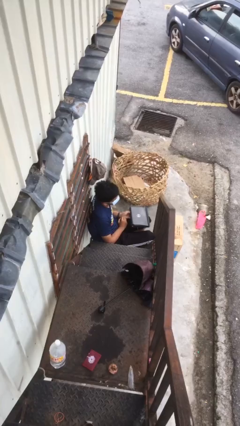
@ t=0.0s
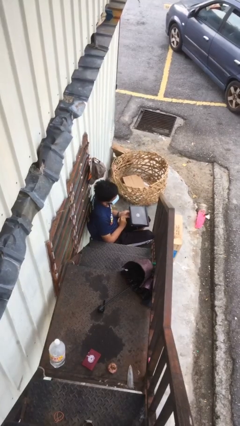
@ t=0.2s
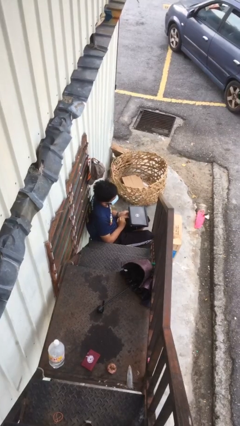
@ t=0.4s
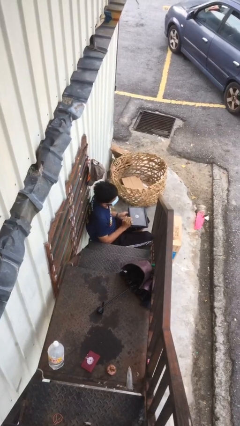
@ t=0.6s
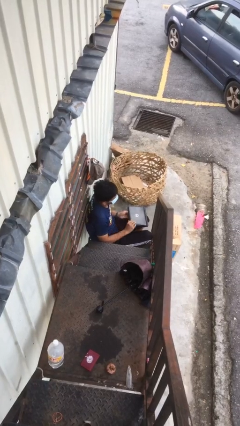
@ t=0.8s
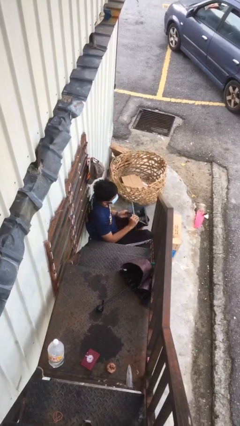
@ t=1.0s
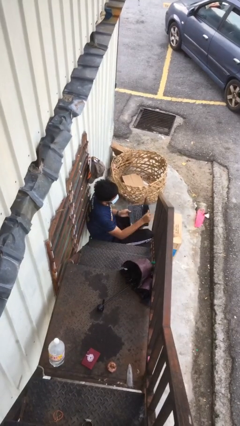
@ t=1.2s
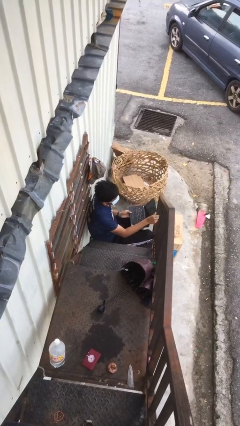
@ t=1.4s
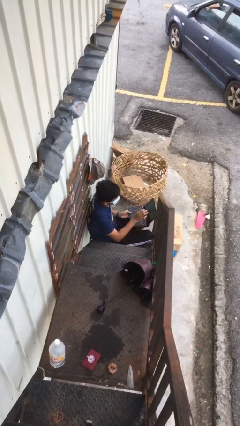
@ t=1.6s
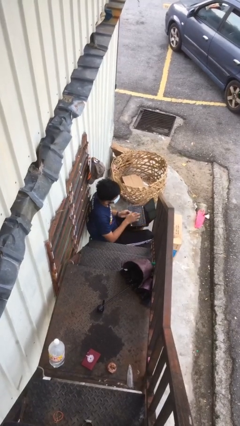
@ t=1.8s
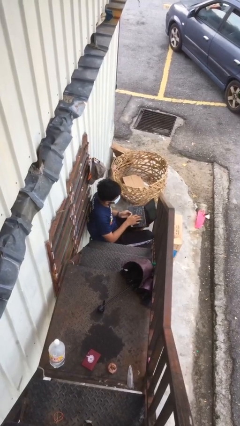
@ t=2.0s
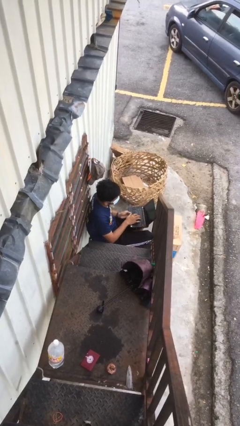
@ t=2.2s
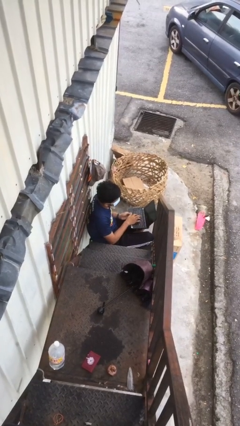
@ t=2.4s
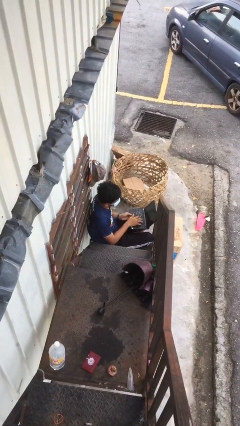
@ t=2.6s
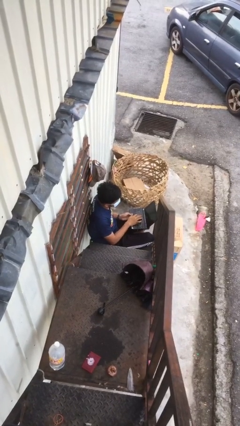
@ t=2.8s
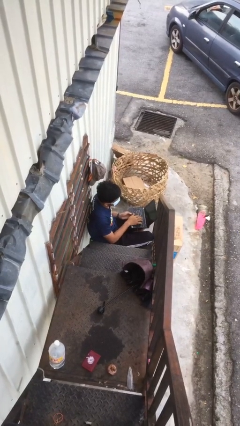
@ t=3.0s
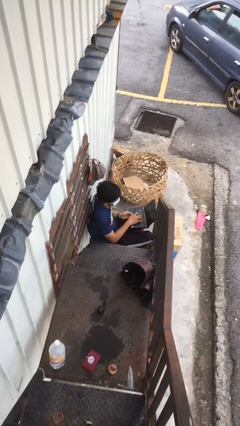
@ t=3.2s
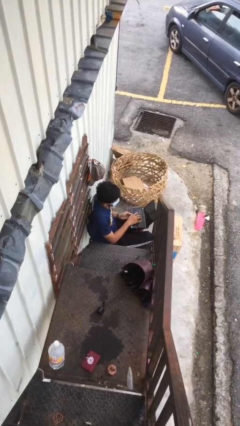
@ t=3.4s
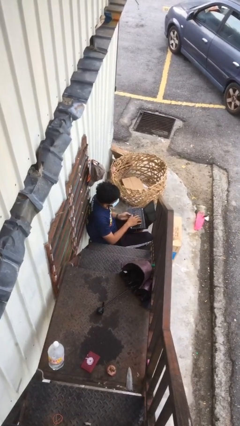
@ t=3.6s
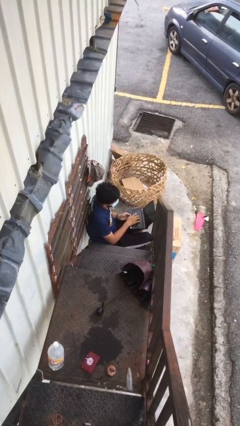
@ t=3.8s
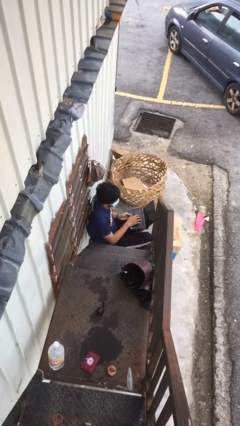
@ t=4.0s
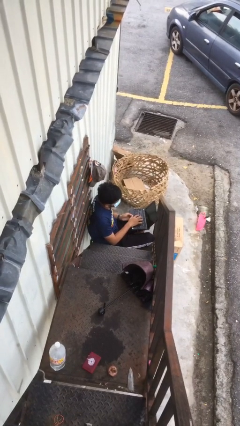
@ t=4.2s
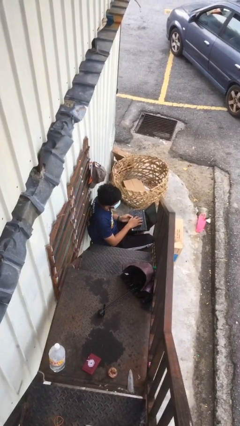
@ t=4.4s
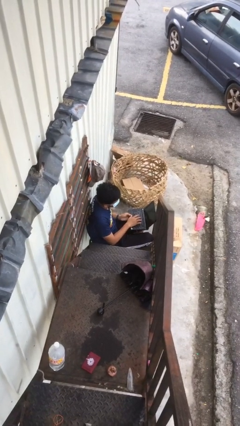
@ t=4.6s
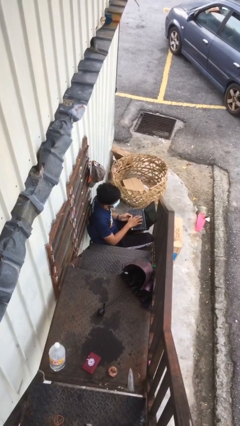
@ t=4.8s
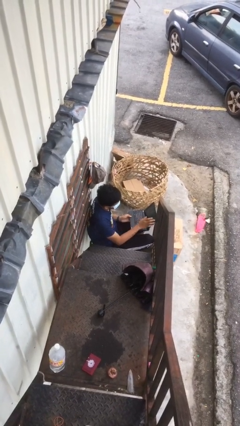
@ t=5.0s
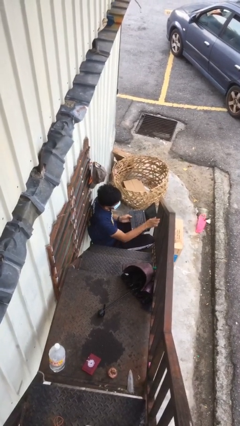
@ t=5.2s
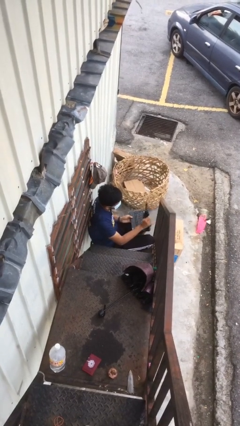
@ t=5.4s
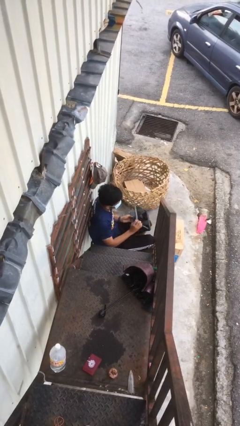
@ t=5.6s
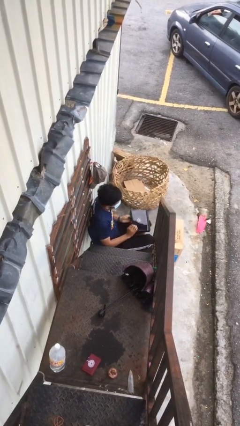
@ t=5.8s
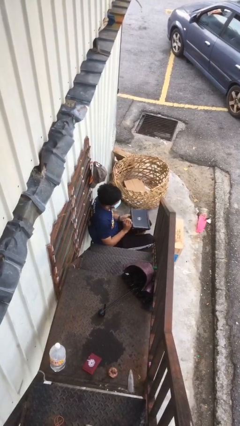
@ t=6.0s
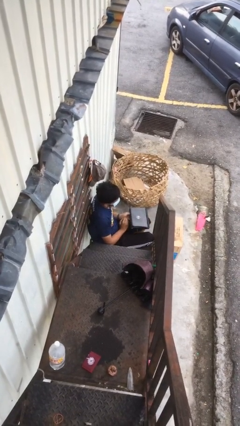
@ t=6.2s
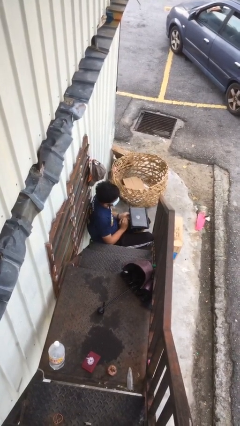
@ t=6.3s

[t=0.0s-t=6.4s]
person interacts with laptop

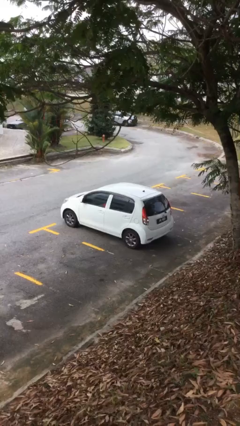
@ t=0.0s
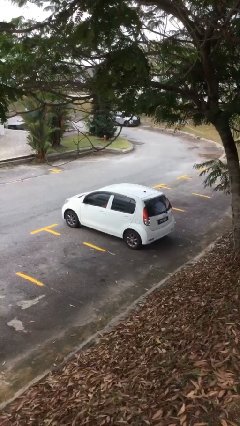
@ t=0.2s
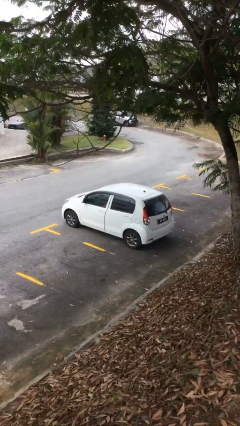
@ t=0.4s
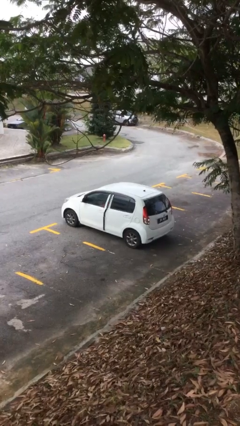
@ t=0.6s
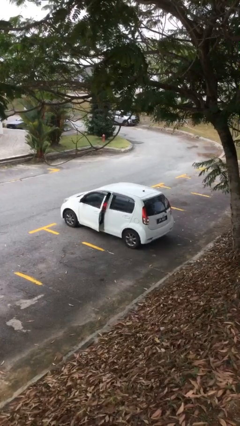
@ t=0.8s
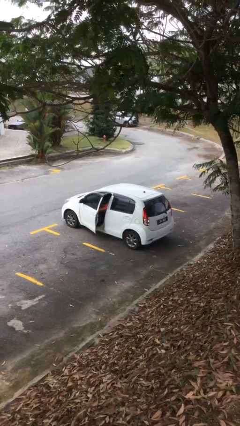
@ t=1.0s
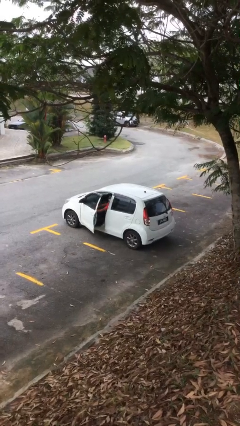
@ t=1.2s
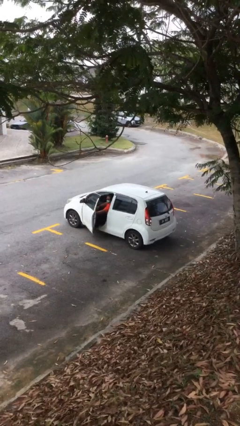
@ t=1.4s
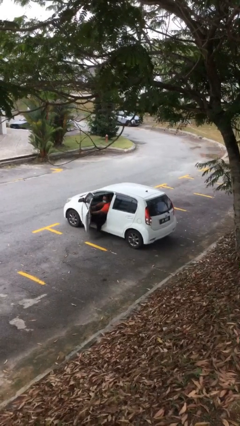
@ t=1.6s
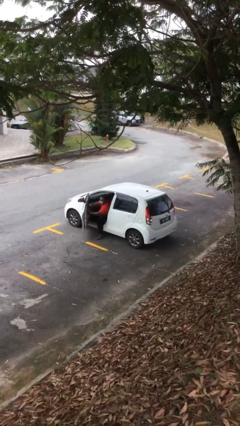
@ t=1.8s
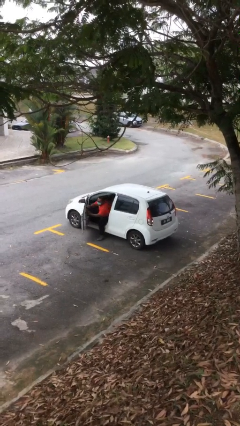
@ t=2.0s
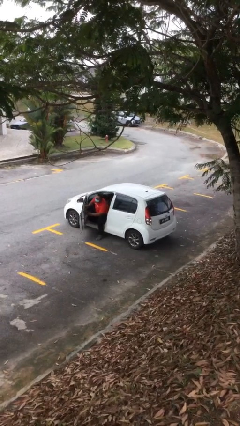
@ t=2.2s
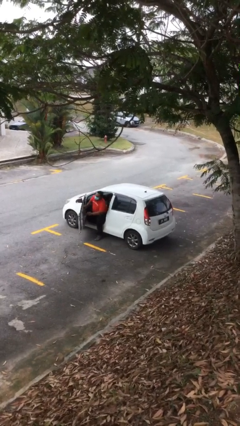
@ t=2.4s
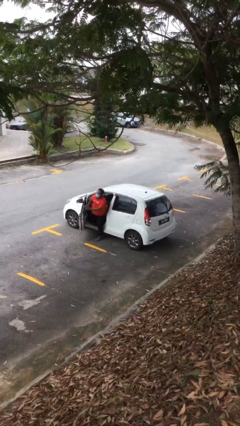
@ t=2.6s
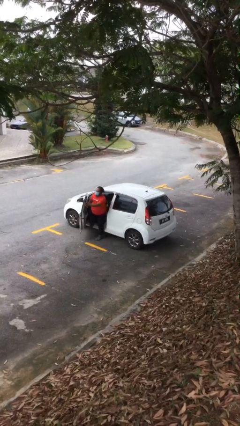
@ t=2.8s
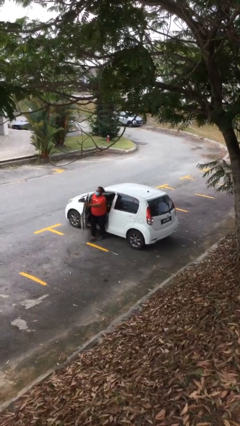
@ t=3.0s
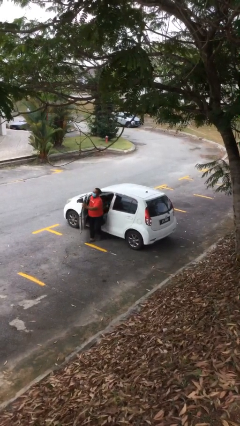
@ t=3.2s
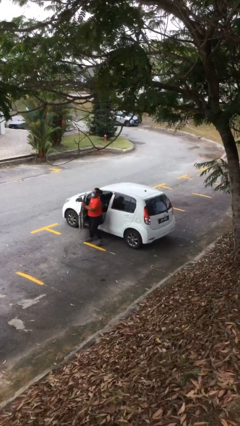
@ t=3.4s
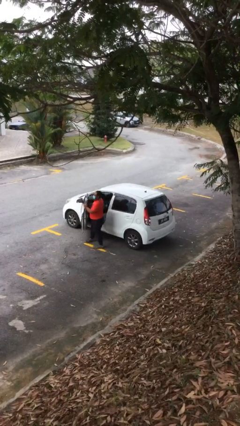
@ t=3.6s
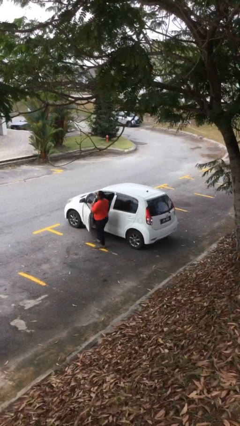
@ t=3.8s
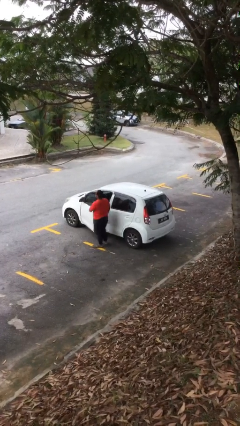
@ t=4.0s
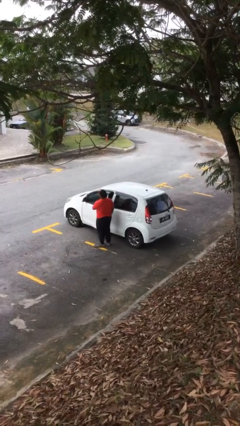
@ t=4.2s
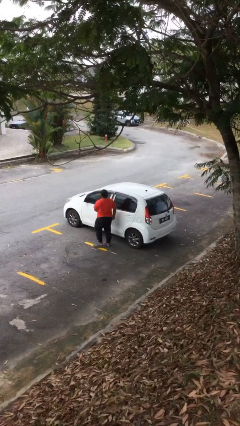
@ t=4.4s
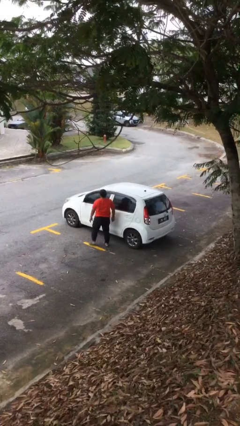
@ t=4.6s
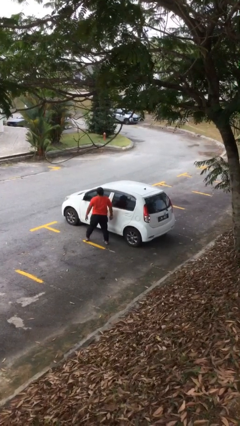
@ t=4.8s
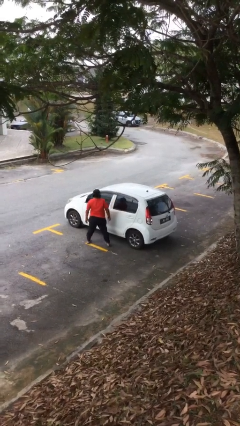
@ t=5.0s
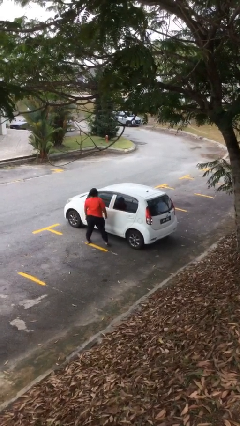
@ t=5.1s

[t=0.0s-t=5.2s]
car drops off person

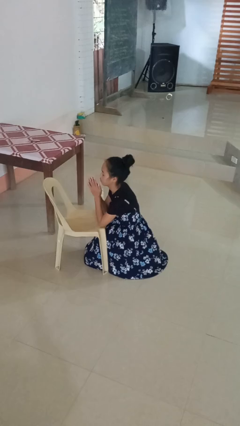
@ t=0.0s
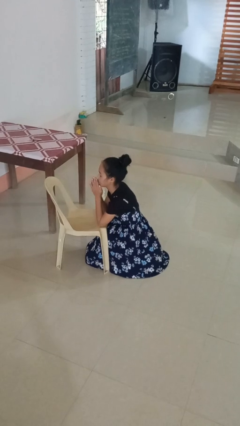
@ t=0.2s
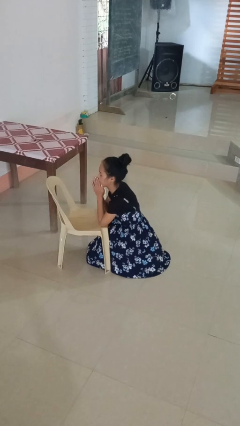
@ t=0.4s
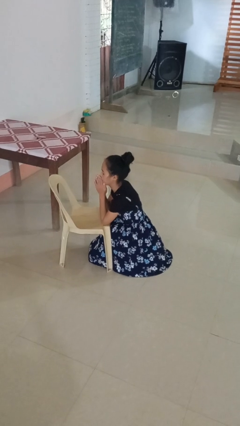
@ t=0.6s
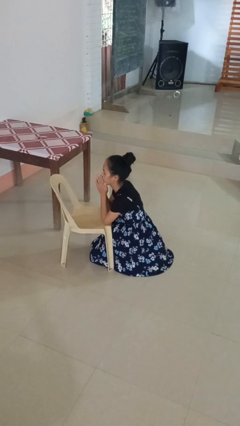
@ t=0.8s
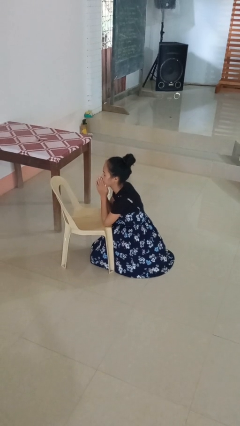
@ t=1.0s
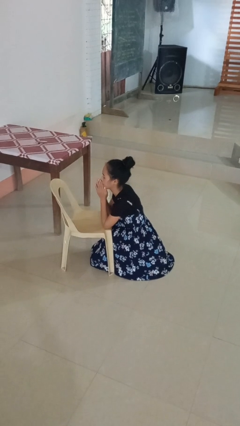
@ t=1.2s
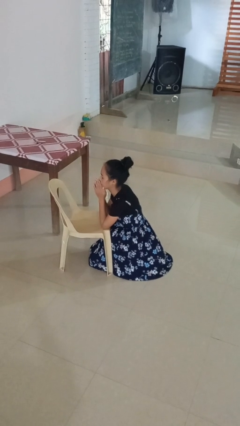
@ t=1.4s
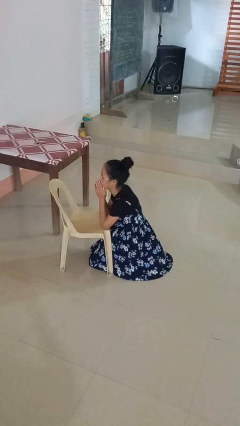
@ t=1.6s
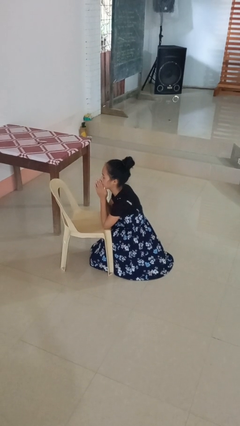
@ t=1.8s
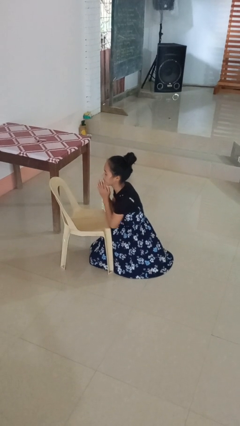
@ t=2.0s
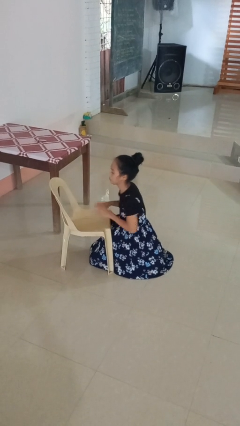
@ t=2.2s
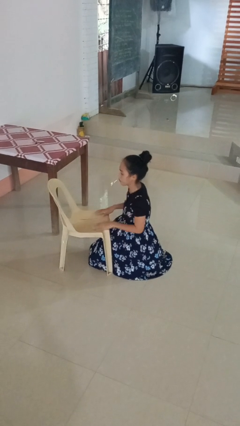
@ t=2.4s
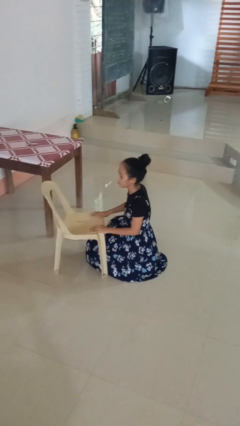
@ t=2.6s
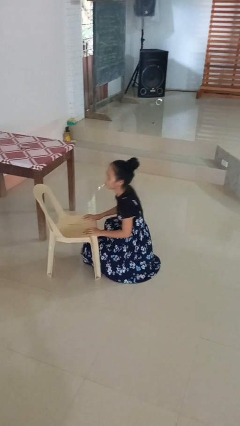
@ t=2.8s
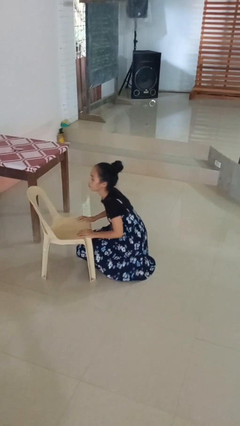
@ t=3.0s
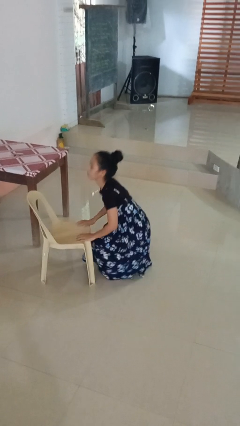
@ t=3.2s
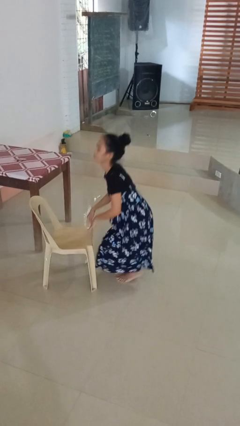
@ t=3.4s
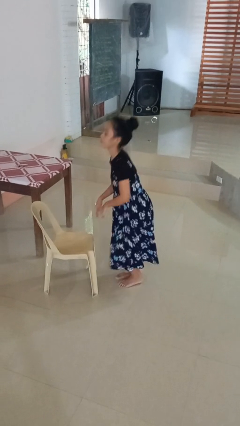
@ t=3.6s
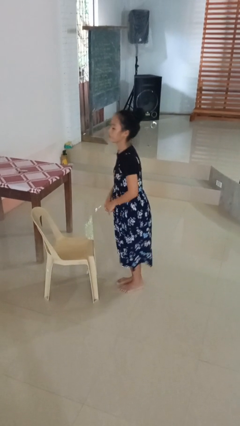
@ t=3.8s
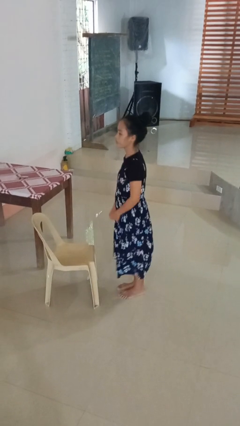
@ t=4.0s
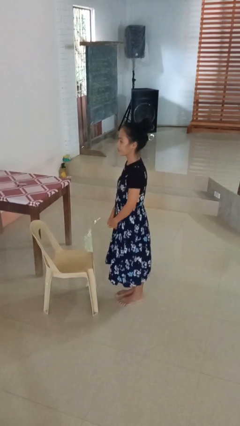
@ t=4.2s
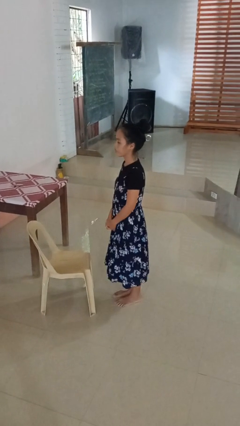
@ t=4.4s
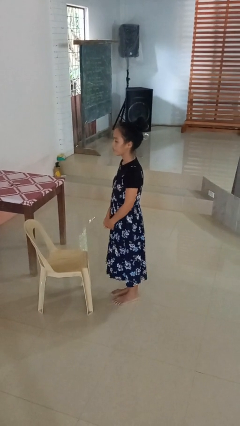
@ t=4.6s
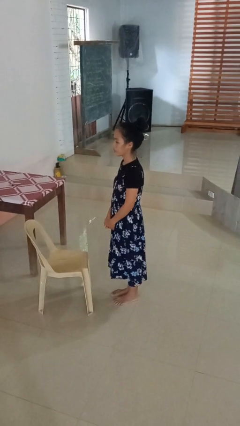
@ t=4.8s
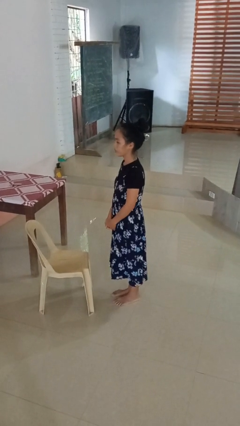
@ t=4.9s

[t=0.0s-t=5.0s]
person prays

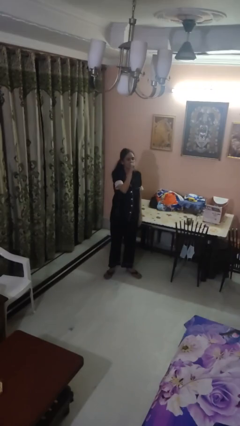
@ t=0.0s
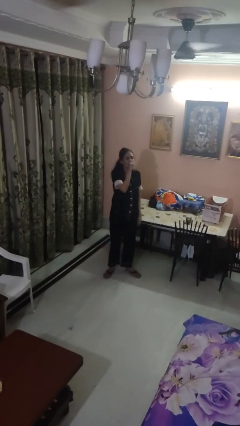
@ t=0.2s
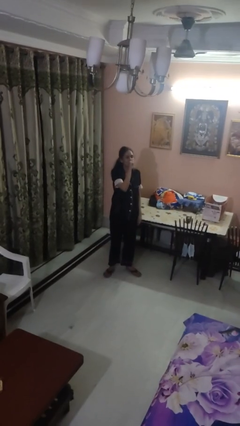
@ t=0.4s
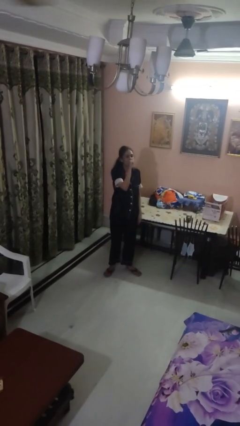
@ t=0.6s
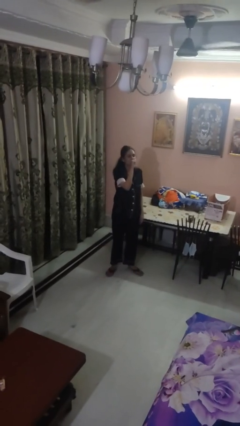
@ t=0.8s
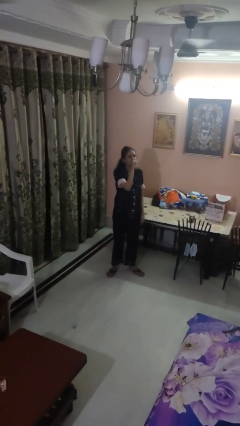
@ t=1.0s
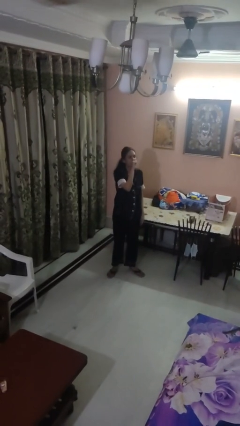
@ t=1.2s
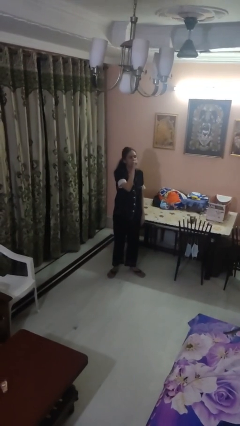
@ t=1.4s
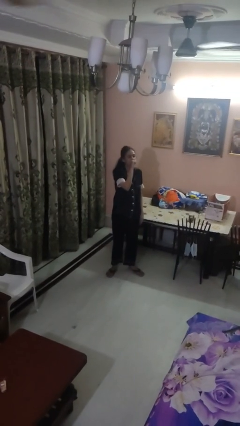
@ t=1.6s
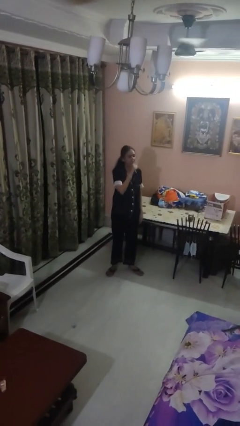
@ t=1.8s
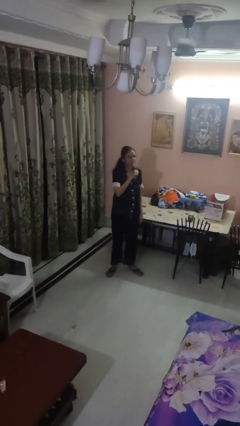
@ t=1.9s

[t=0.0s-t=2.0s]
person vapes
